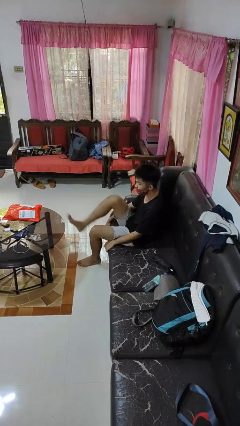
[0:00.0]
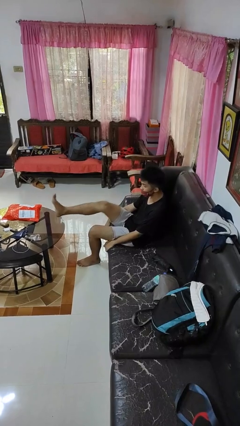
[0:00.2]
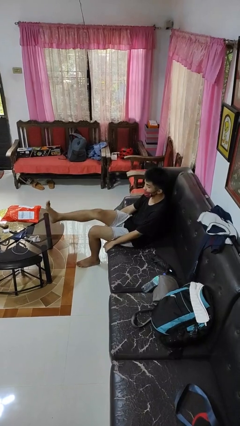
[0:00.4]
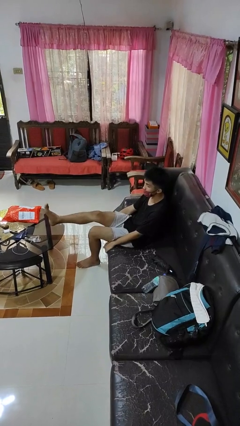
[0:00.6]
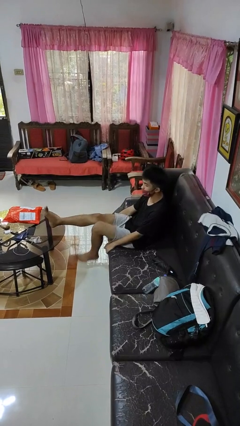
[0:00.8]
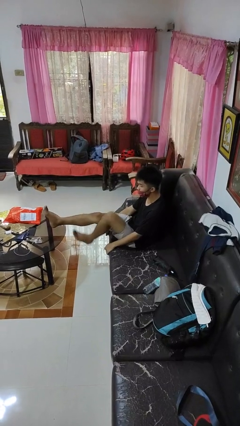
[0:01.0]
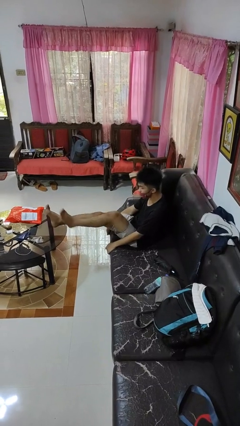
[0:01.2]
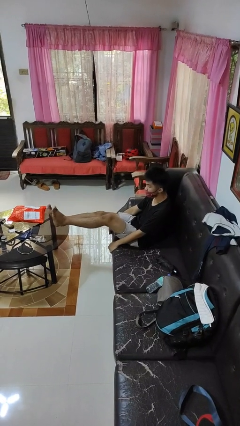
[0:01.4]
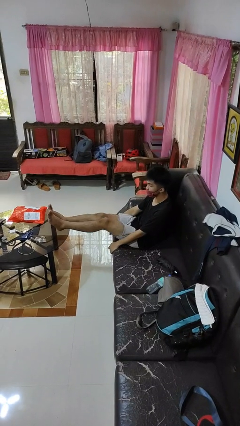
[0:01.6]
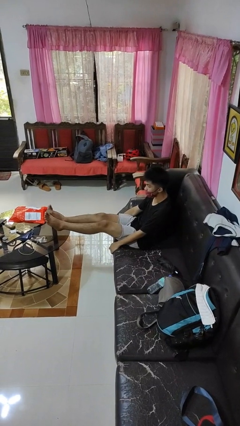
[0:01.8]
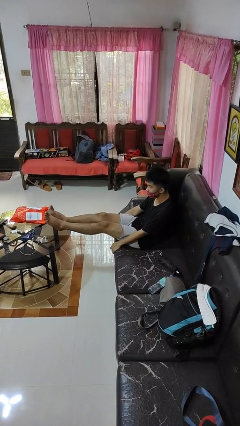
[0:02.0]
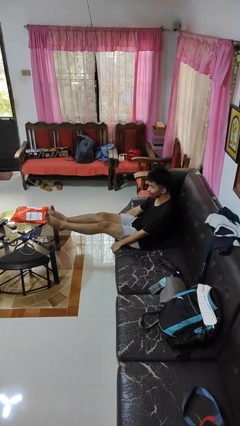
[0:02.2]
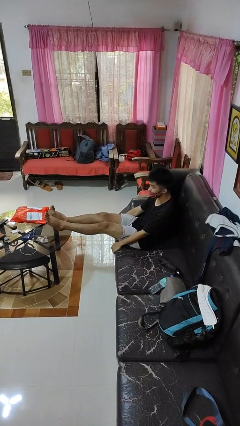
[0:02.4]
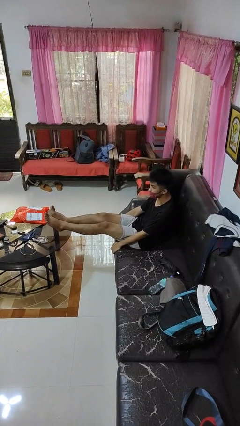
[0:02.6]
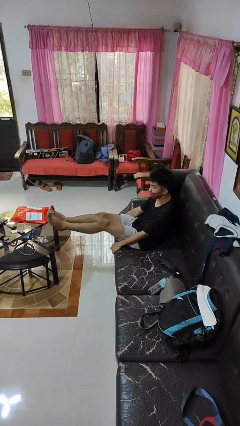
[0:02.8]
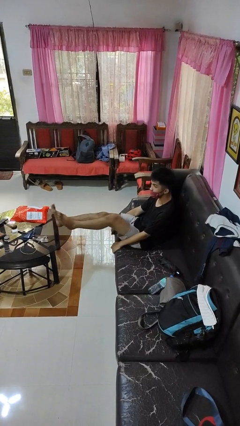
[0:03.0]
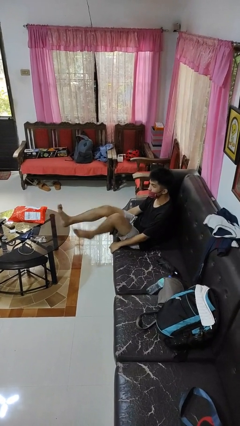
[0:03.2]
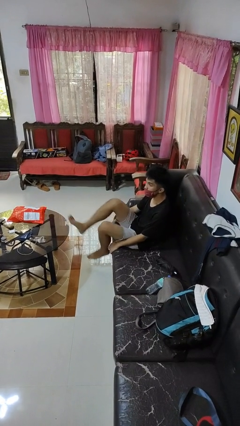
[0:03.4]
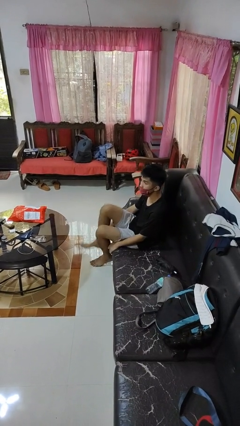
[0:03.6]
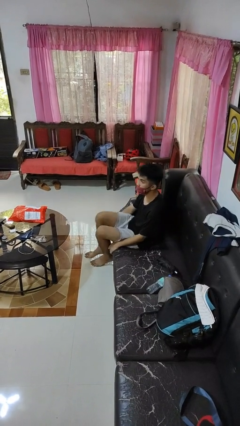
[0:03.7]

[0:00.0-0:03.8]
person puts feet up

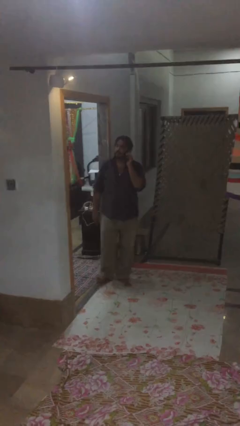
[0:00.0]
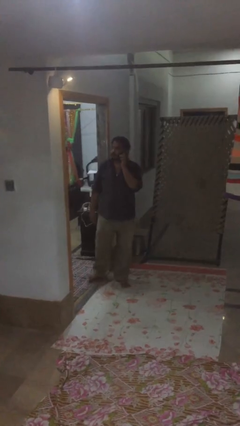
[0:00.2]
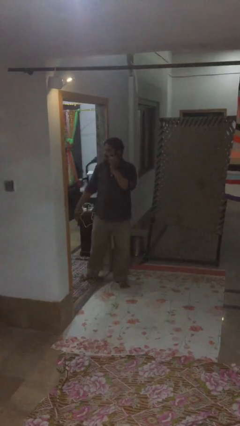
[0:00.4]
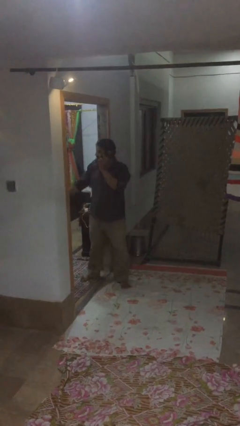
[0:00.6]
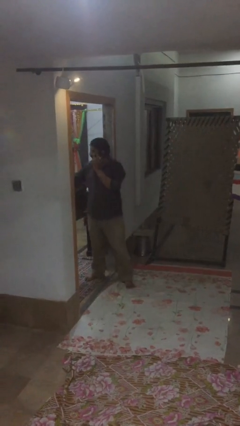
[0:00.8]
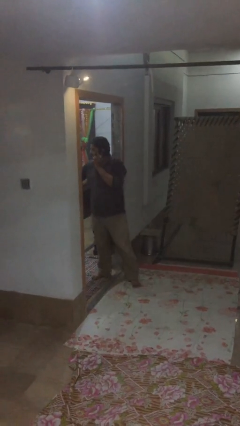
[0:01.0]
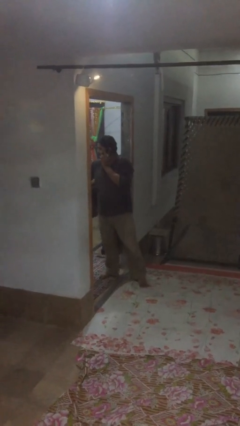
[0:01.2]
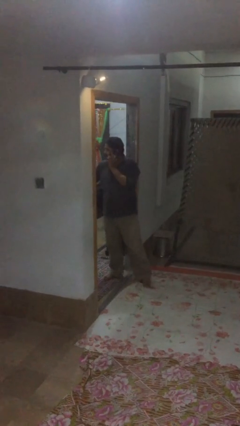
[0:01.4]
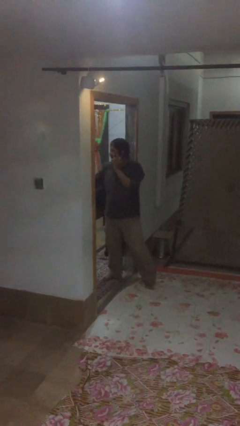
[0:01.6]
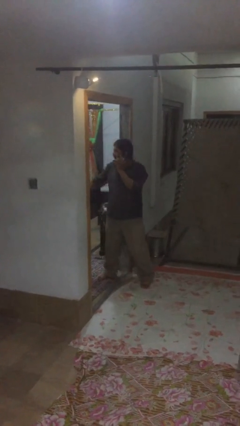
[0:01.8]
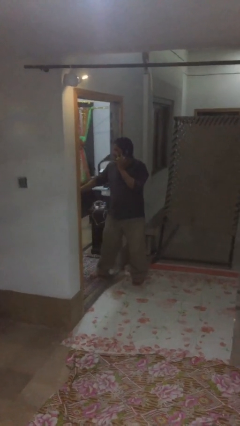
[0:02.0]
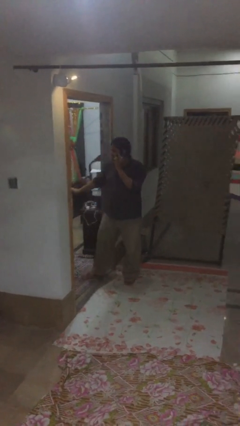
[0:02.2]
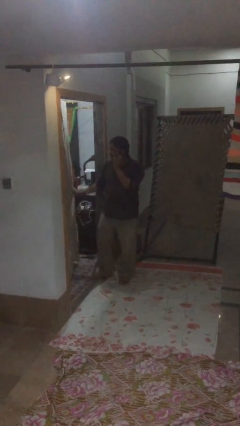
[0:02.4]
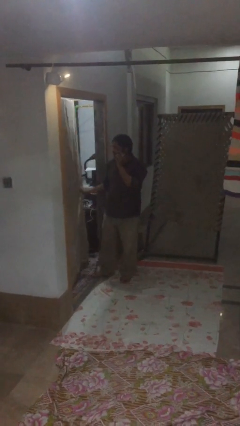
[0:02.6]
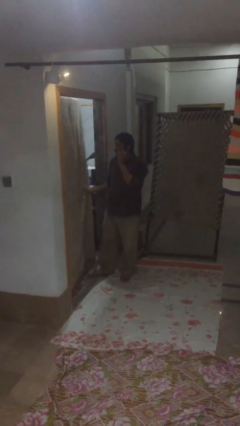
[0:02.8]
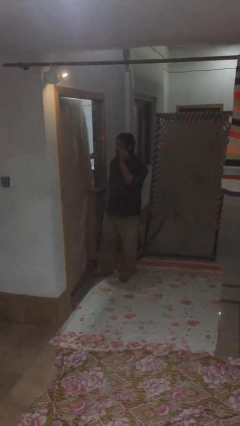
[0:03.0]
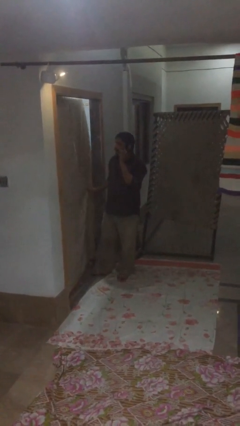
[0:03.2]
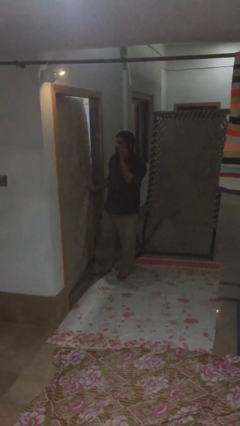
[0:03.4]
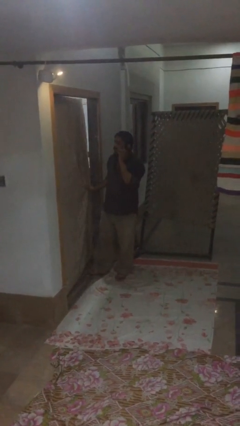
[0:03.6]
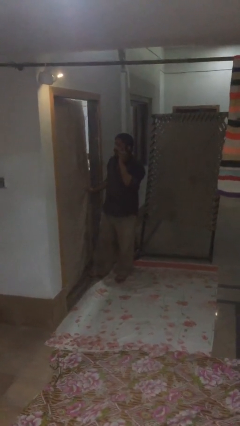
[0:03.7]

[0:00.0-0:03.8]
person closes facility door

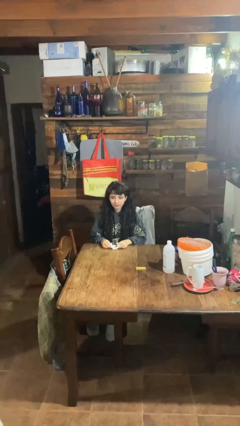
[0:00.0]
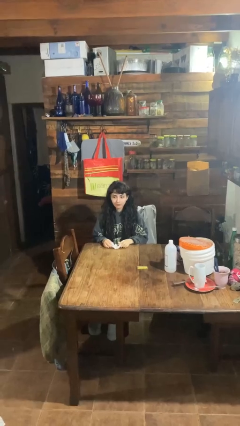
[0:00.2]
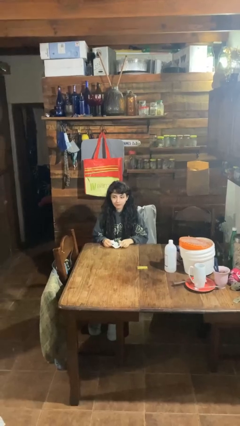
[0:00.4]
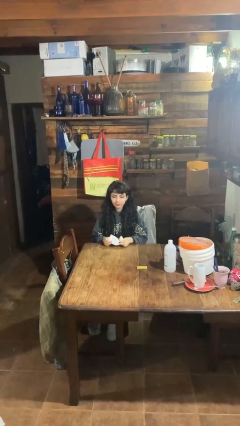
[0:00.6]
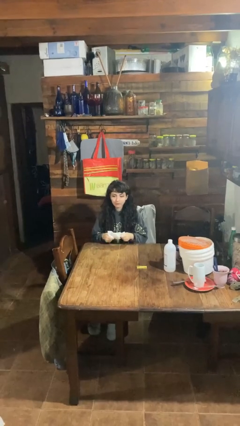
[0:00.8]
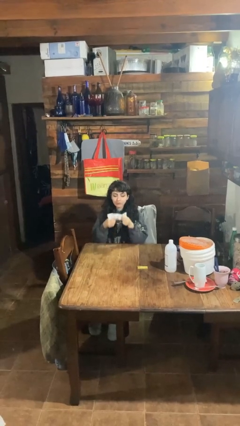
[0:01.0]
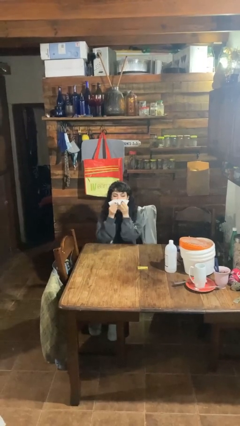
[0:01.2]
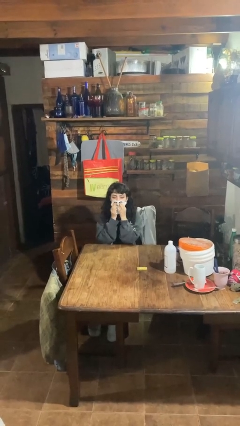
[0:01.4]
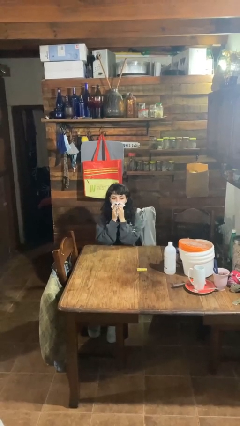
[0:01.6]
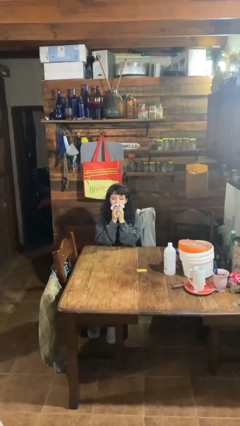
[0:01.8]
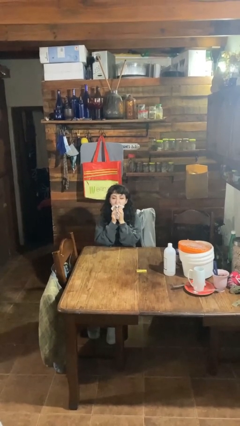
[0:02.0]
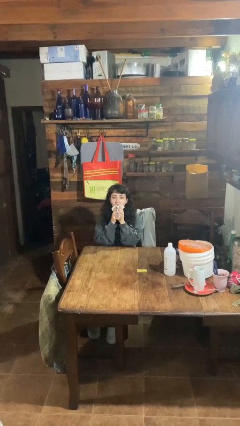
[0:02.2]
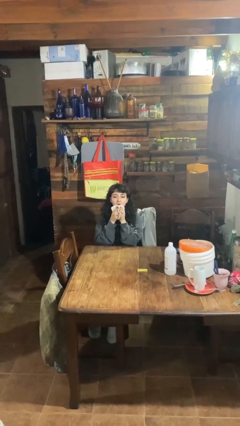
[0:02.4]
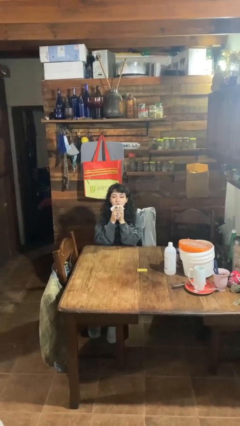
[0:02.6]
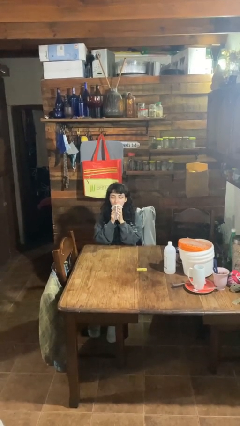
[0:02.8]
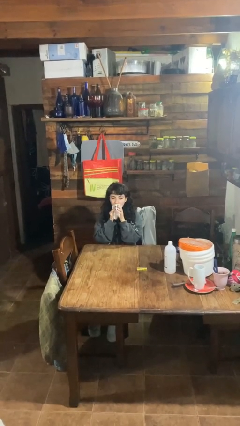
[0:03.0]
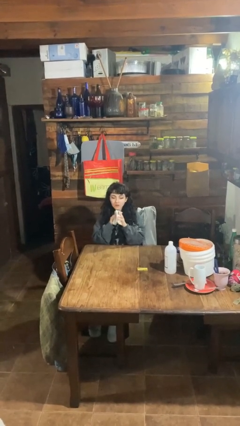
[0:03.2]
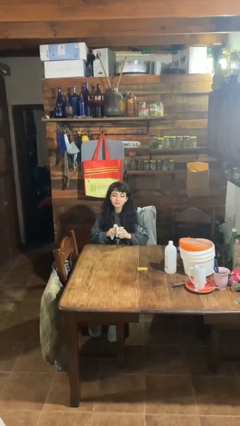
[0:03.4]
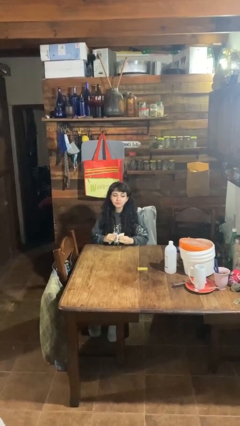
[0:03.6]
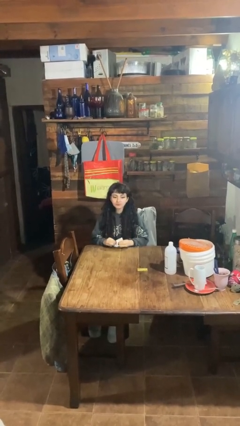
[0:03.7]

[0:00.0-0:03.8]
person wipes mouth with napkin

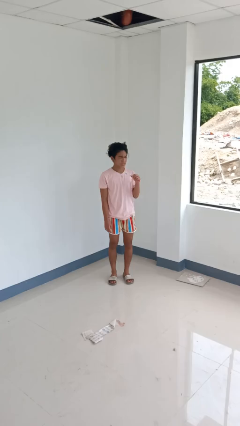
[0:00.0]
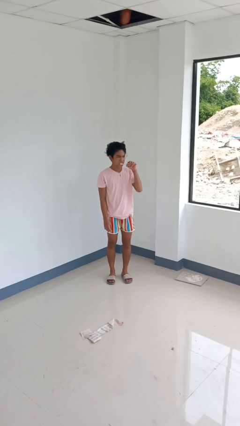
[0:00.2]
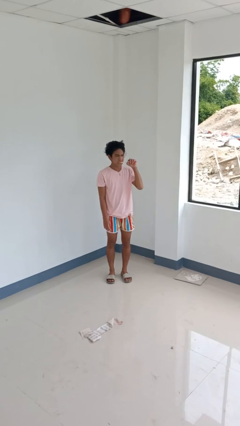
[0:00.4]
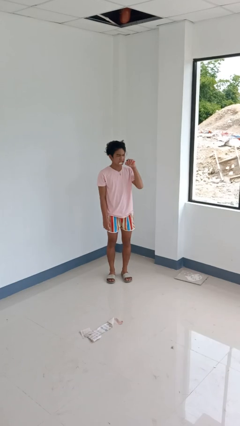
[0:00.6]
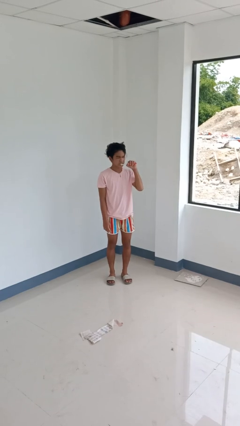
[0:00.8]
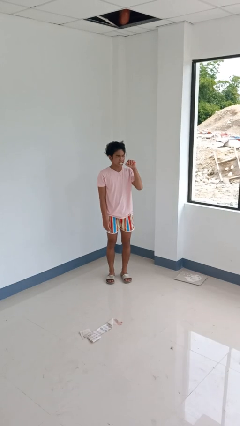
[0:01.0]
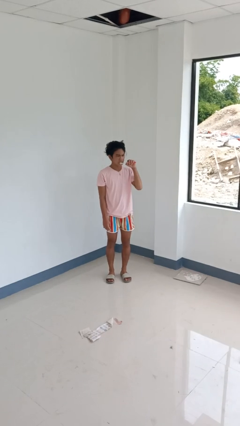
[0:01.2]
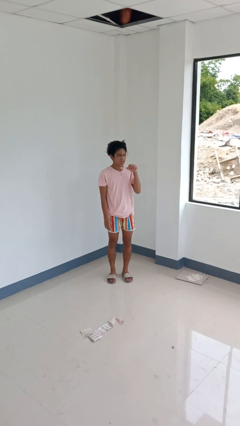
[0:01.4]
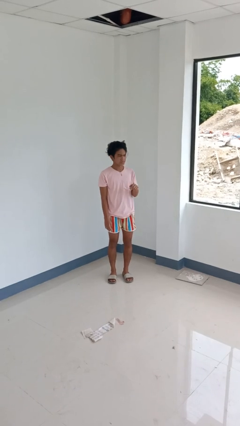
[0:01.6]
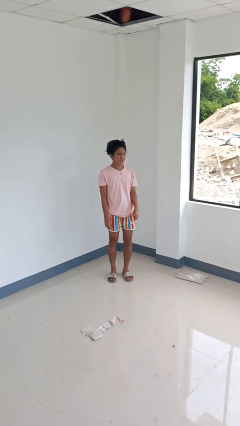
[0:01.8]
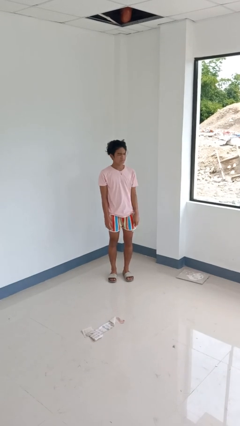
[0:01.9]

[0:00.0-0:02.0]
person brushes teeth

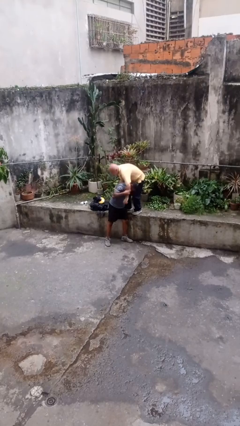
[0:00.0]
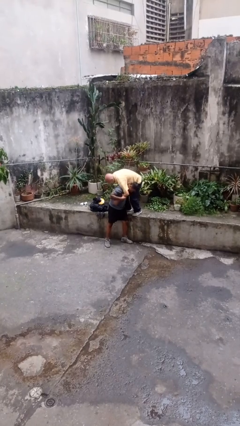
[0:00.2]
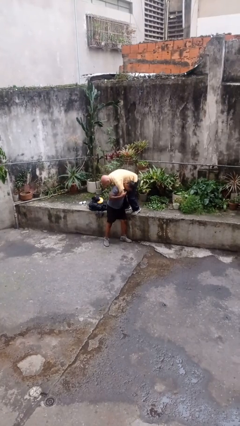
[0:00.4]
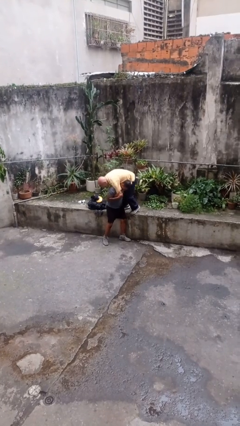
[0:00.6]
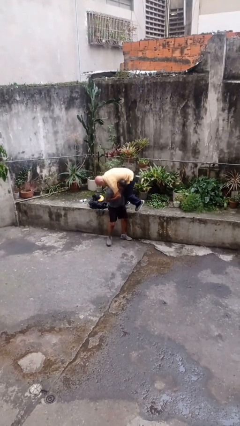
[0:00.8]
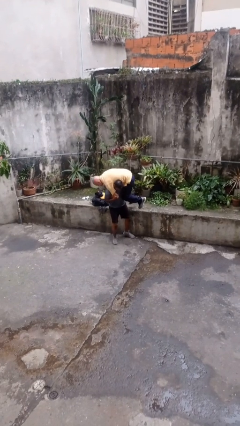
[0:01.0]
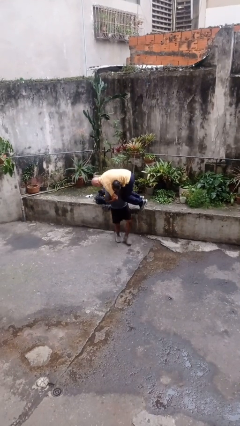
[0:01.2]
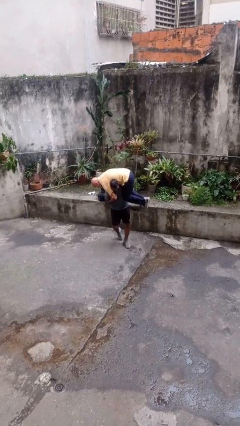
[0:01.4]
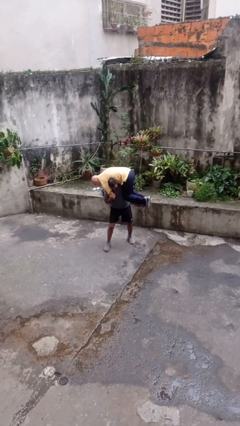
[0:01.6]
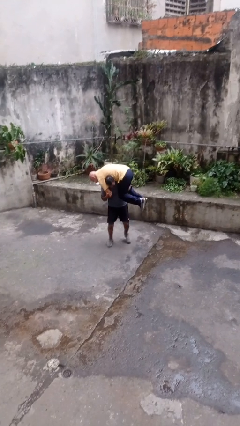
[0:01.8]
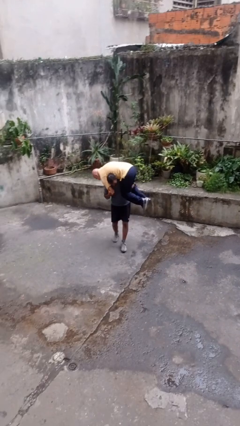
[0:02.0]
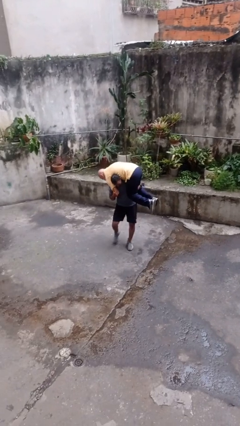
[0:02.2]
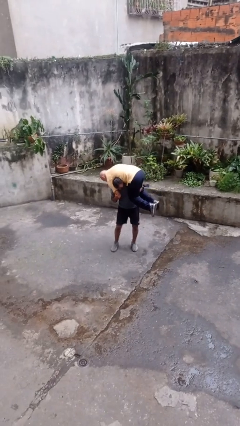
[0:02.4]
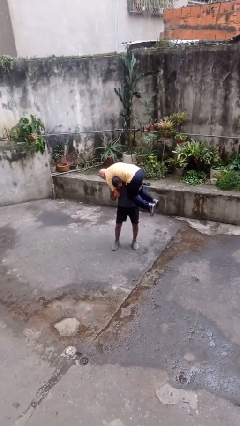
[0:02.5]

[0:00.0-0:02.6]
person carries person over shoulder

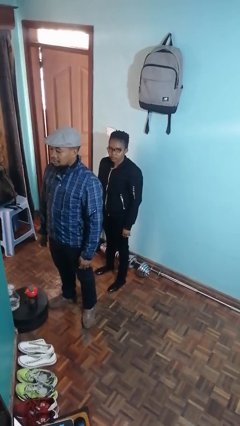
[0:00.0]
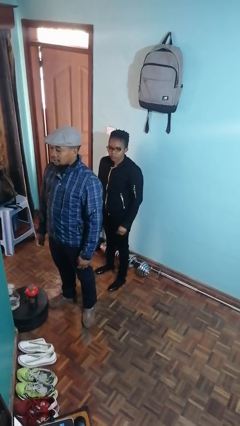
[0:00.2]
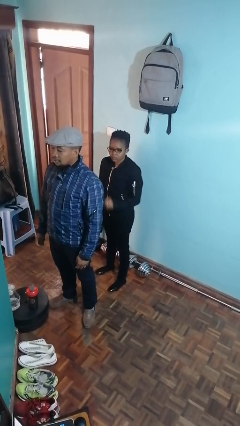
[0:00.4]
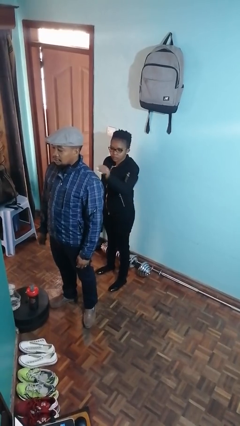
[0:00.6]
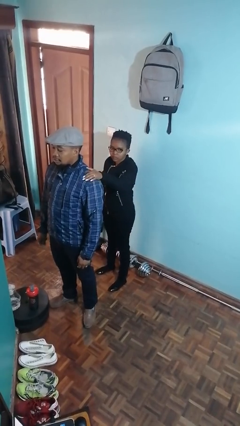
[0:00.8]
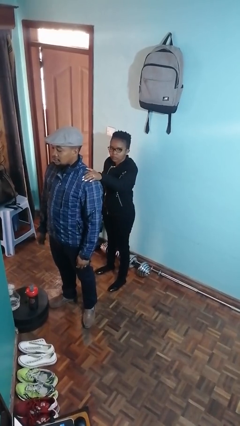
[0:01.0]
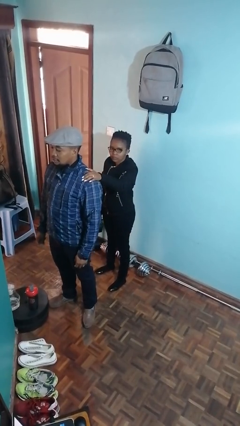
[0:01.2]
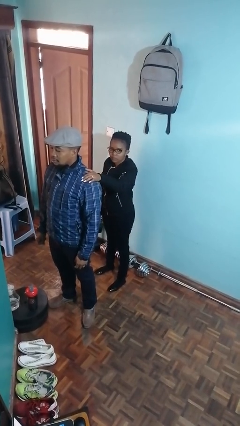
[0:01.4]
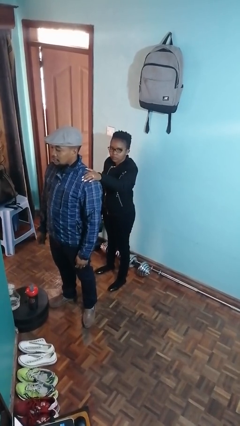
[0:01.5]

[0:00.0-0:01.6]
person grabs person by shoulder
